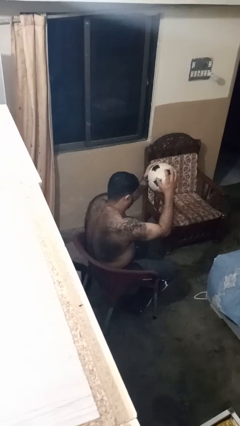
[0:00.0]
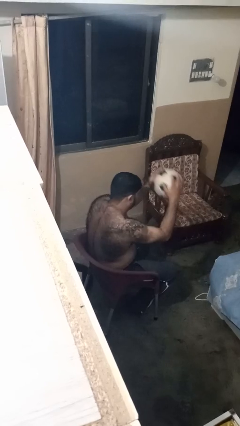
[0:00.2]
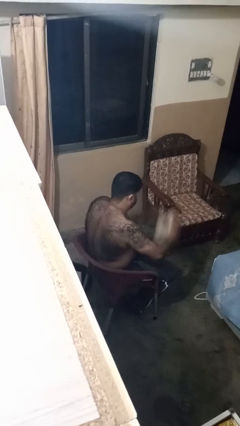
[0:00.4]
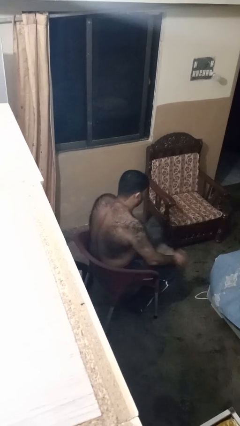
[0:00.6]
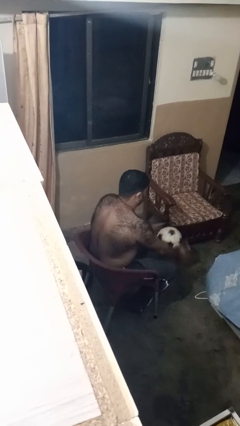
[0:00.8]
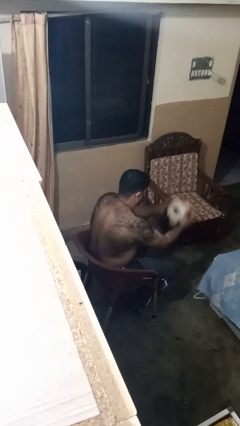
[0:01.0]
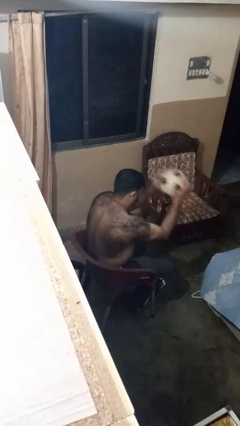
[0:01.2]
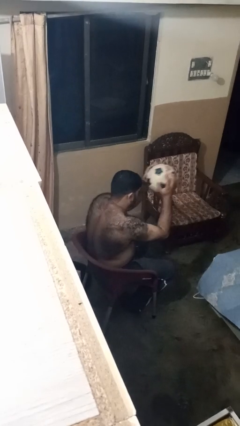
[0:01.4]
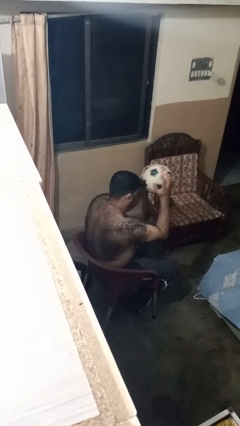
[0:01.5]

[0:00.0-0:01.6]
person bounces ball on floor

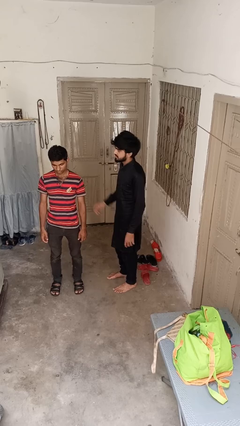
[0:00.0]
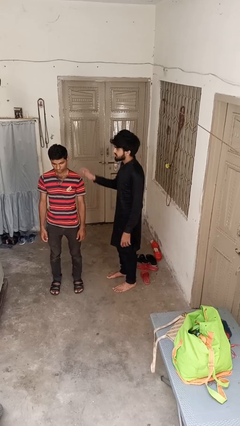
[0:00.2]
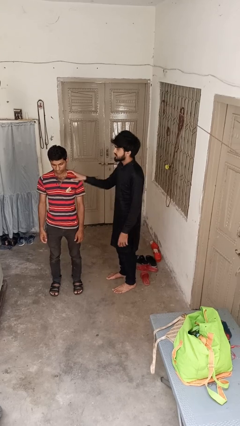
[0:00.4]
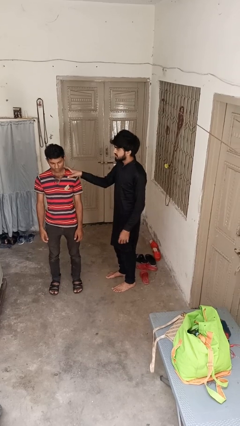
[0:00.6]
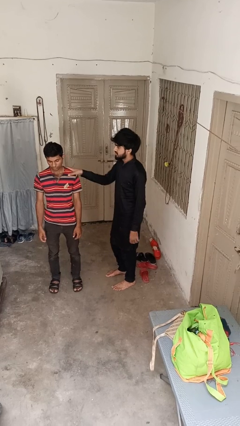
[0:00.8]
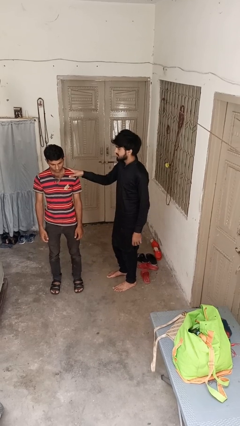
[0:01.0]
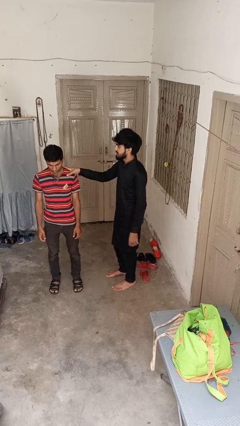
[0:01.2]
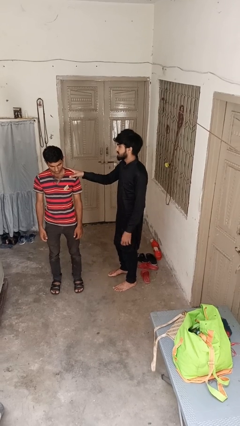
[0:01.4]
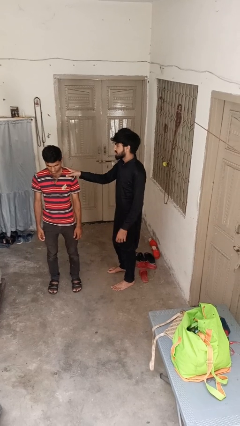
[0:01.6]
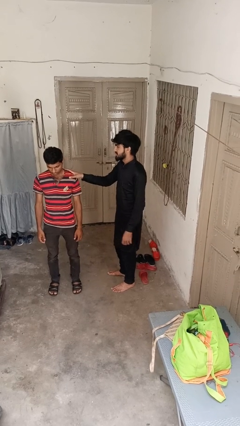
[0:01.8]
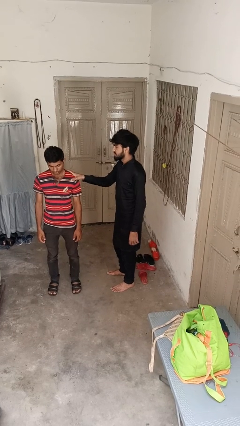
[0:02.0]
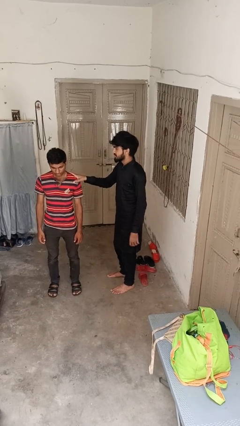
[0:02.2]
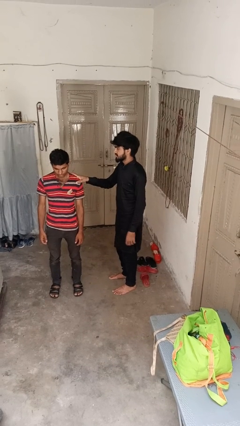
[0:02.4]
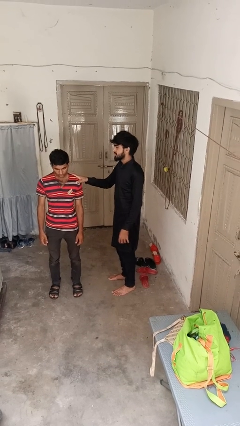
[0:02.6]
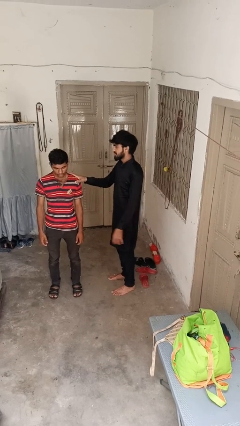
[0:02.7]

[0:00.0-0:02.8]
person grabs person by shoulder

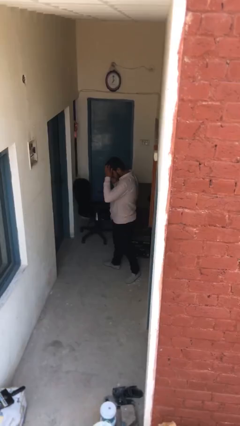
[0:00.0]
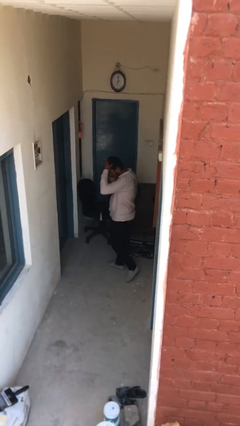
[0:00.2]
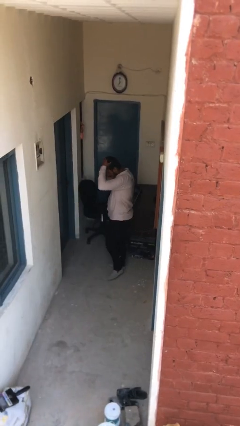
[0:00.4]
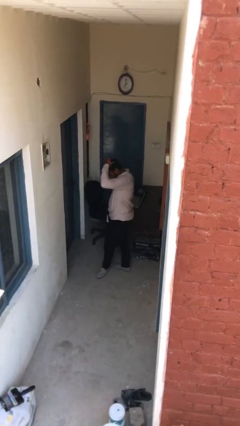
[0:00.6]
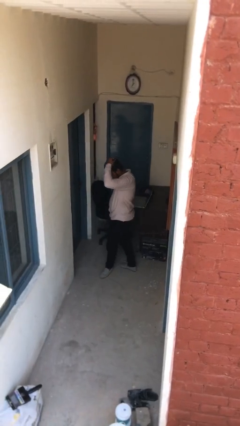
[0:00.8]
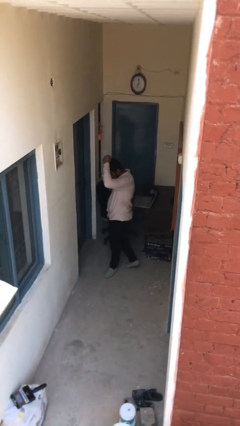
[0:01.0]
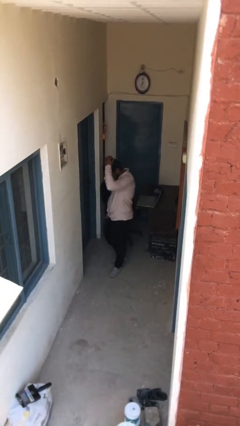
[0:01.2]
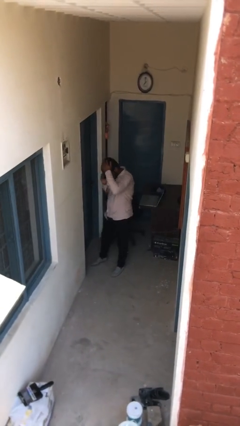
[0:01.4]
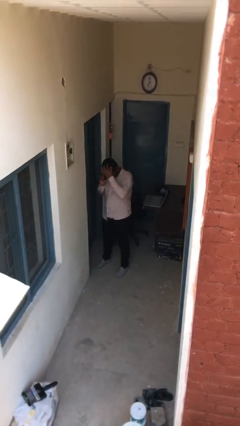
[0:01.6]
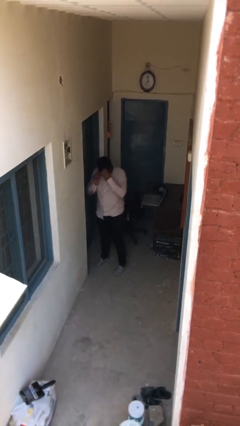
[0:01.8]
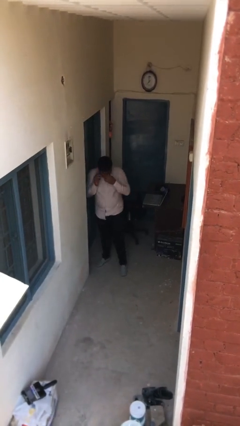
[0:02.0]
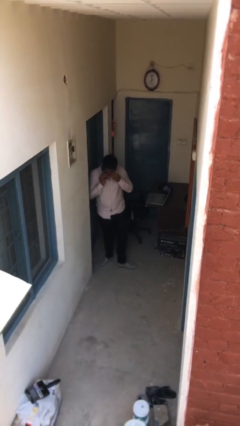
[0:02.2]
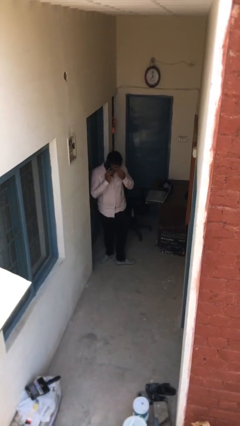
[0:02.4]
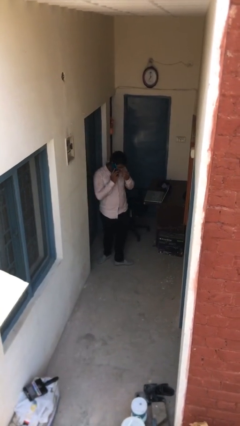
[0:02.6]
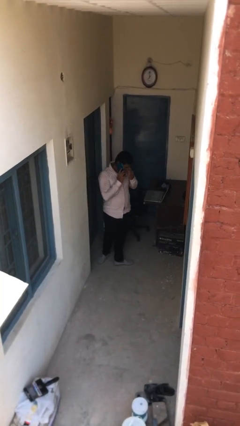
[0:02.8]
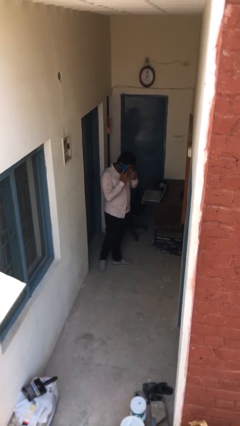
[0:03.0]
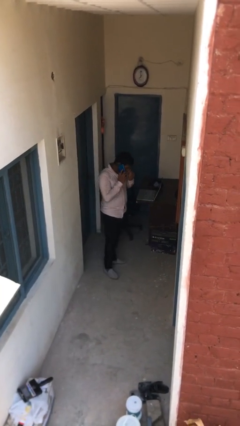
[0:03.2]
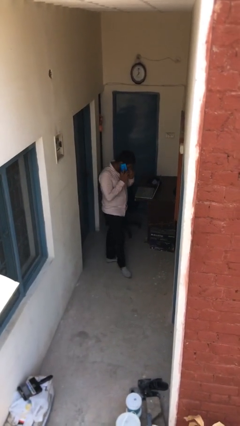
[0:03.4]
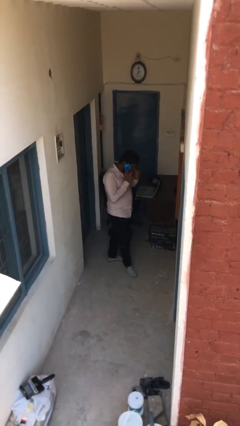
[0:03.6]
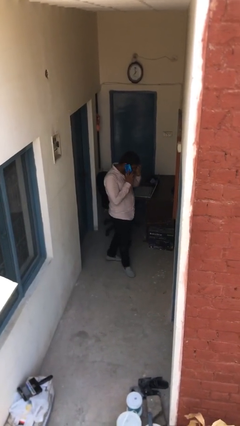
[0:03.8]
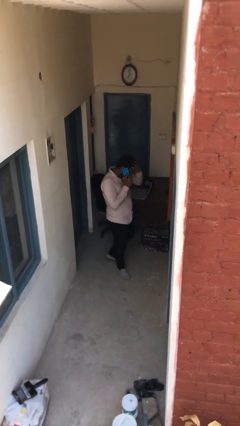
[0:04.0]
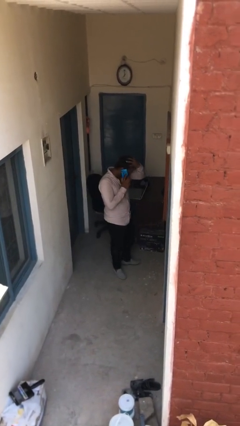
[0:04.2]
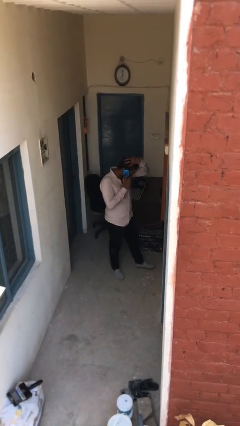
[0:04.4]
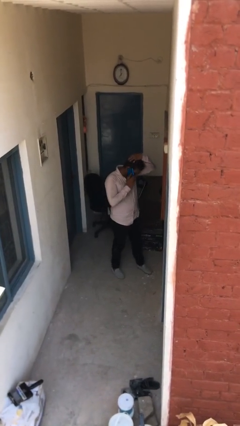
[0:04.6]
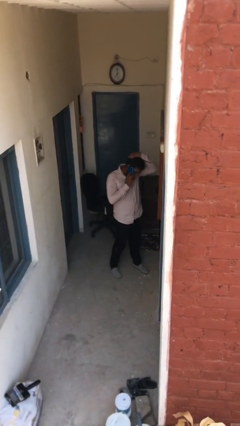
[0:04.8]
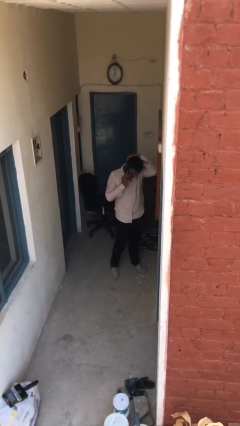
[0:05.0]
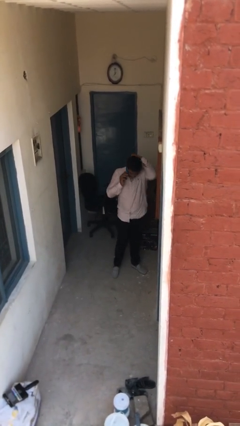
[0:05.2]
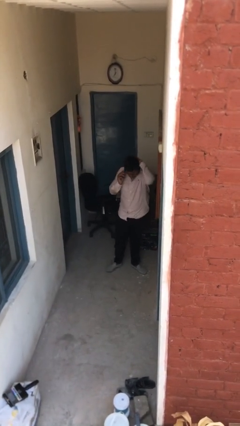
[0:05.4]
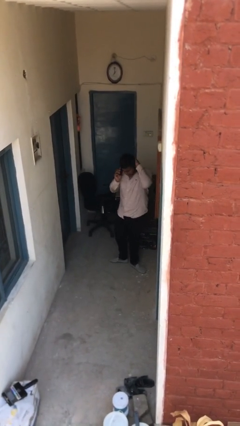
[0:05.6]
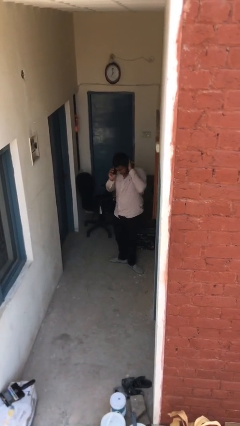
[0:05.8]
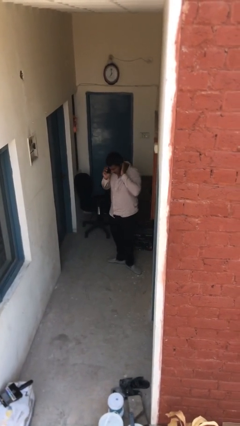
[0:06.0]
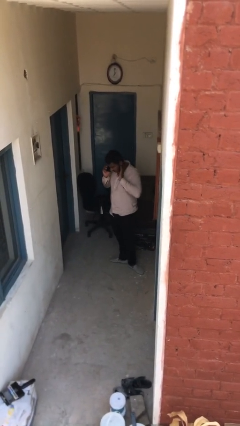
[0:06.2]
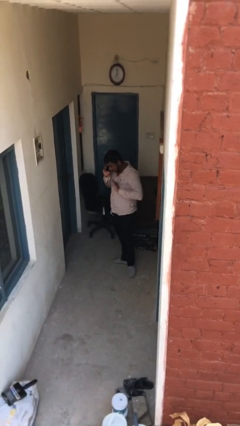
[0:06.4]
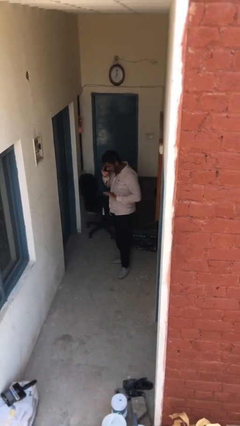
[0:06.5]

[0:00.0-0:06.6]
person talks on phone

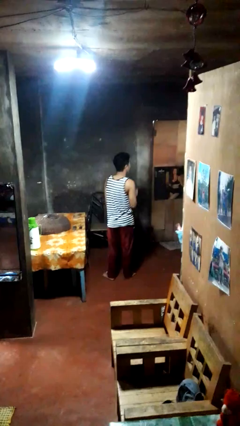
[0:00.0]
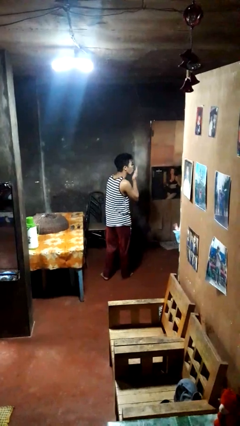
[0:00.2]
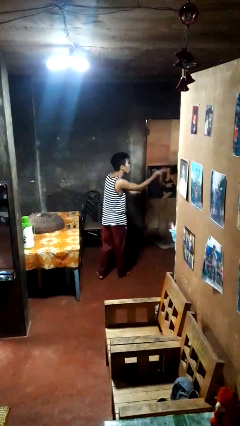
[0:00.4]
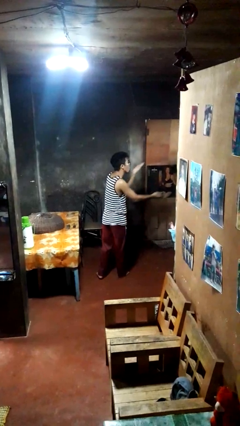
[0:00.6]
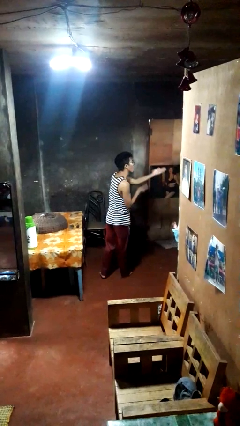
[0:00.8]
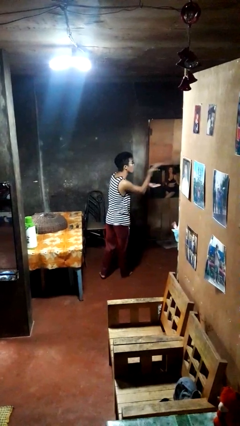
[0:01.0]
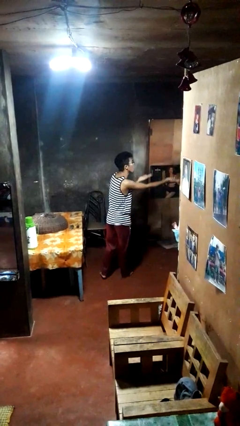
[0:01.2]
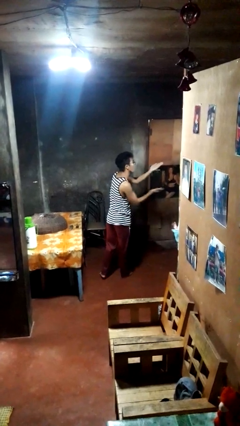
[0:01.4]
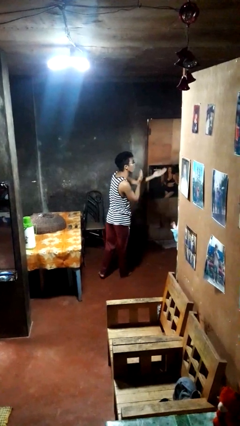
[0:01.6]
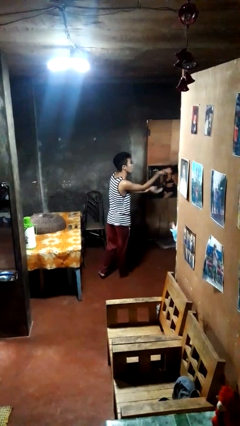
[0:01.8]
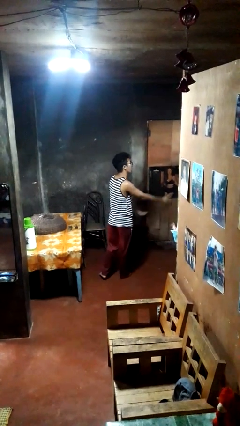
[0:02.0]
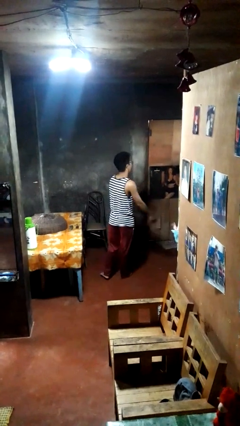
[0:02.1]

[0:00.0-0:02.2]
person gestures blow kiss

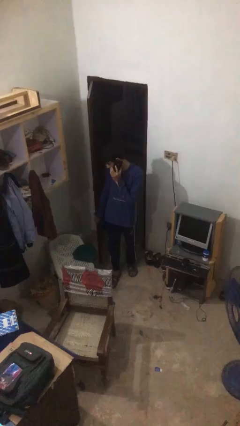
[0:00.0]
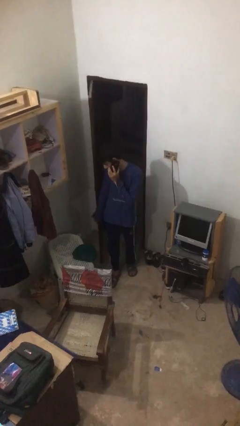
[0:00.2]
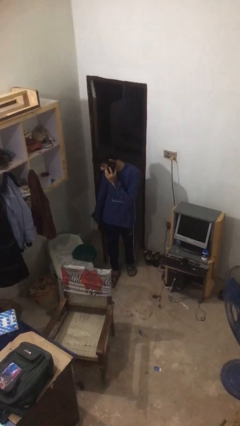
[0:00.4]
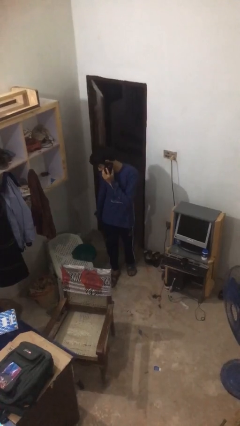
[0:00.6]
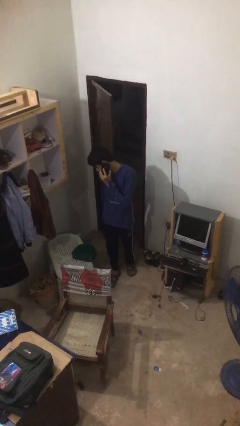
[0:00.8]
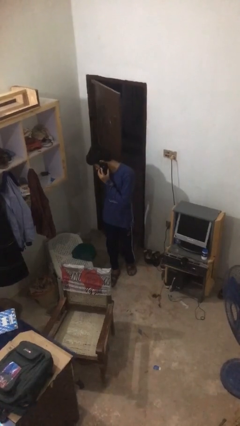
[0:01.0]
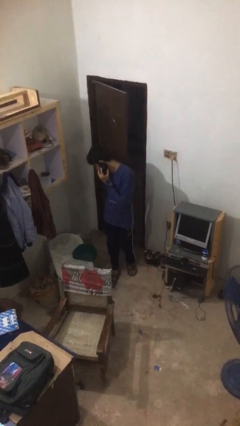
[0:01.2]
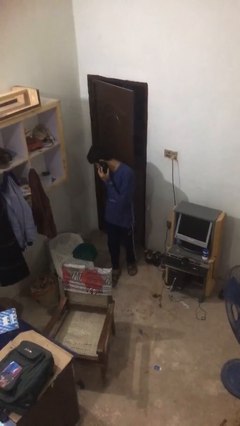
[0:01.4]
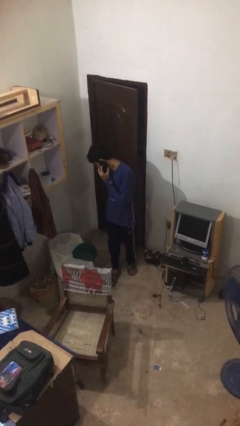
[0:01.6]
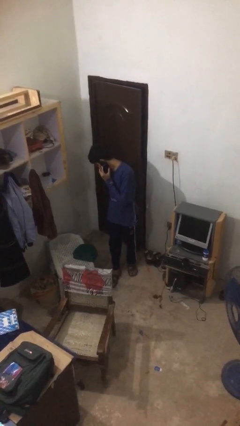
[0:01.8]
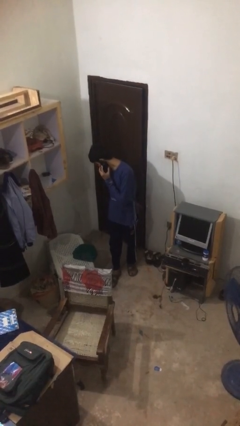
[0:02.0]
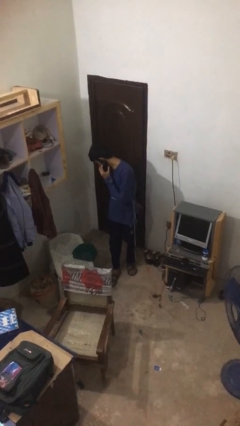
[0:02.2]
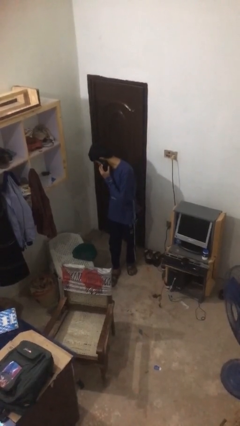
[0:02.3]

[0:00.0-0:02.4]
person closes facility door

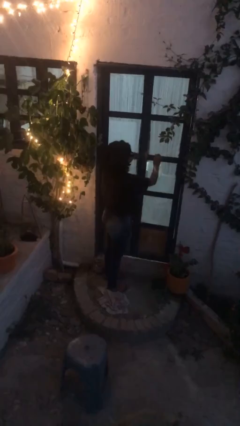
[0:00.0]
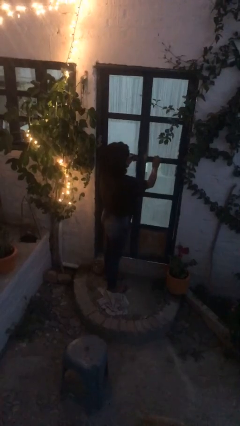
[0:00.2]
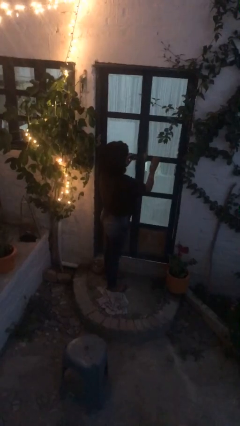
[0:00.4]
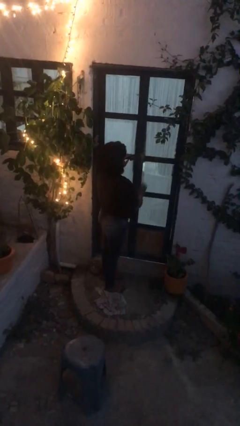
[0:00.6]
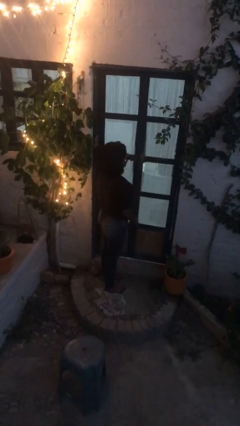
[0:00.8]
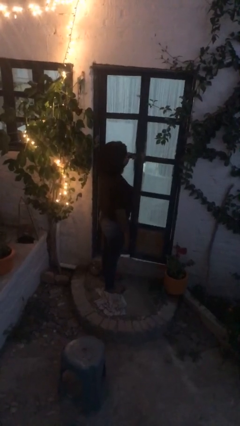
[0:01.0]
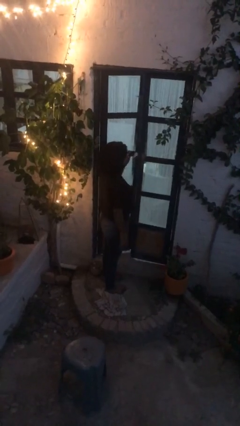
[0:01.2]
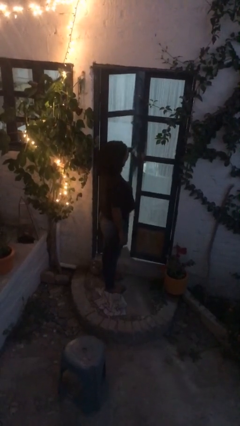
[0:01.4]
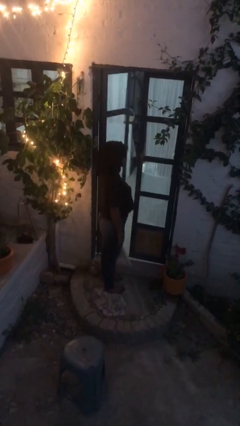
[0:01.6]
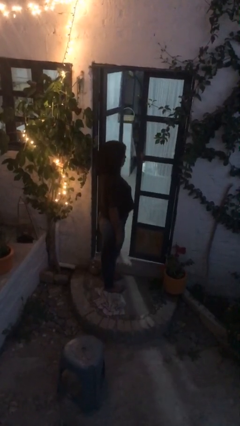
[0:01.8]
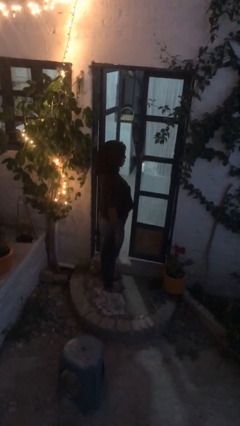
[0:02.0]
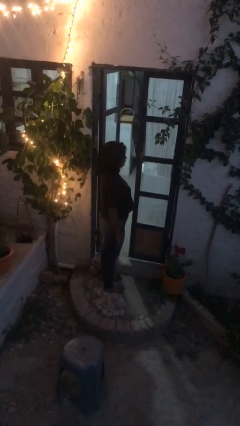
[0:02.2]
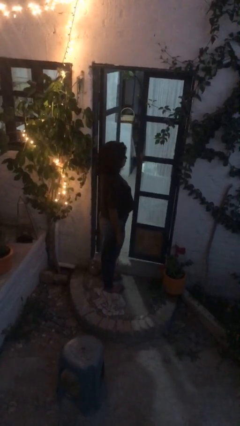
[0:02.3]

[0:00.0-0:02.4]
person opens facility door
